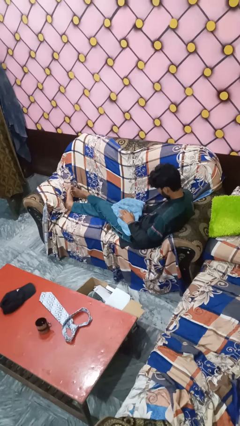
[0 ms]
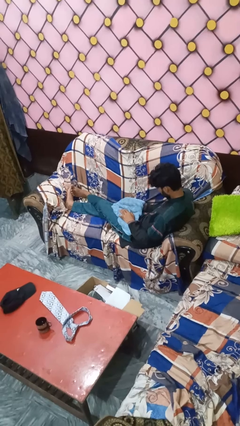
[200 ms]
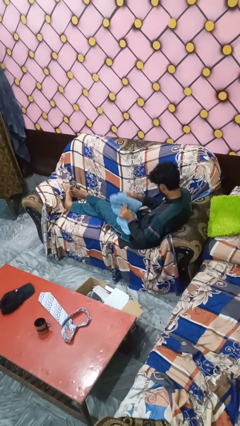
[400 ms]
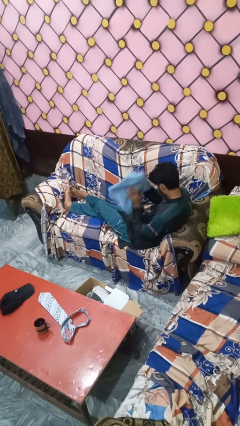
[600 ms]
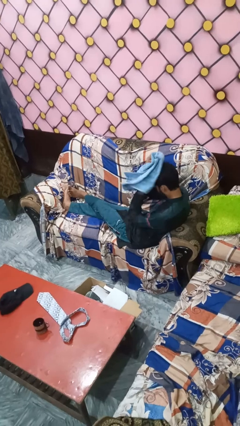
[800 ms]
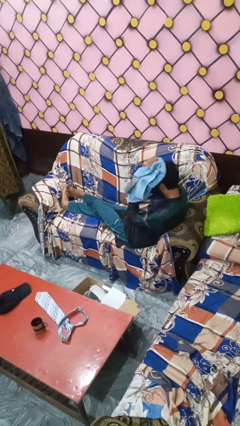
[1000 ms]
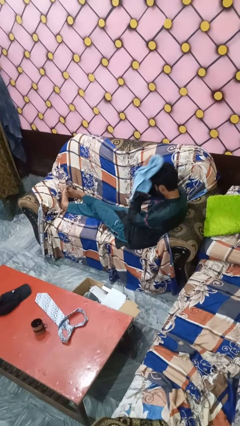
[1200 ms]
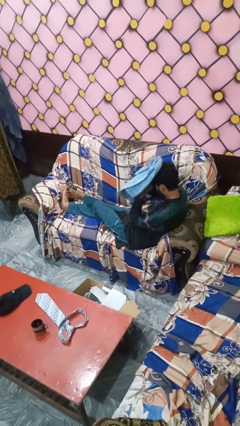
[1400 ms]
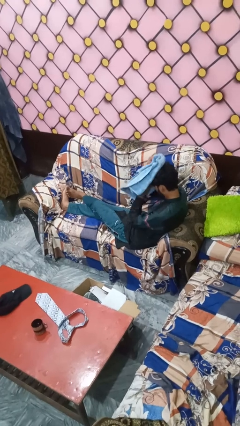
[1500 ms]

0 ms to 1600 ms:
person dries hair with towel

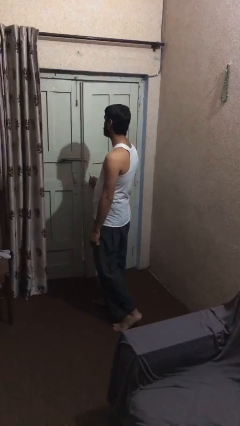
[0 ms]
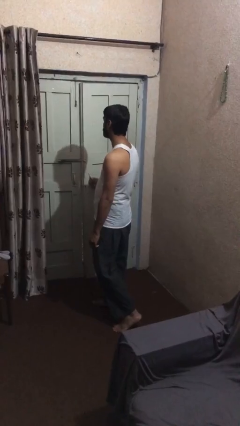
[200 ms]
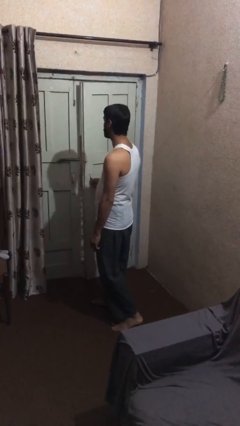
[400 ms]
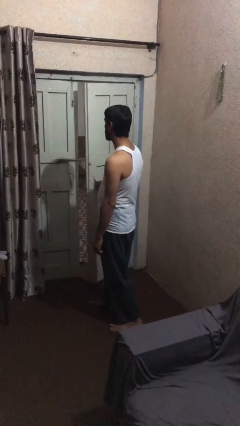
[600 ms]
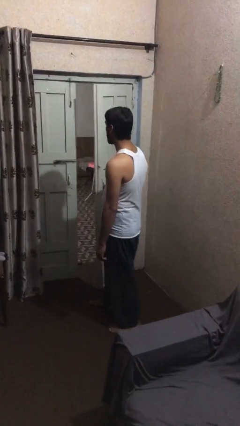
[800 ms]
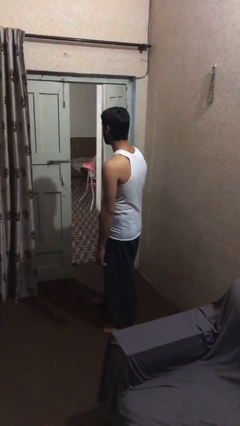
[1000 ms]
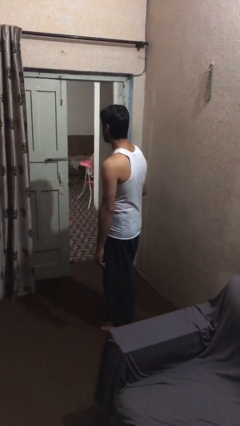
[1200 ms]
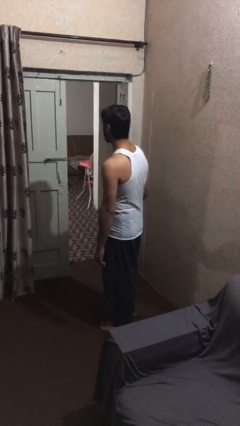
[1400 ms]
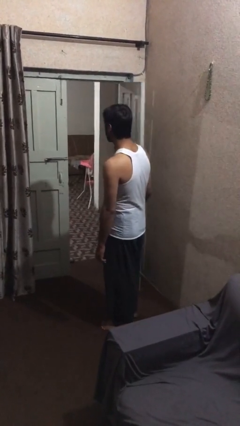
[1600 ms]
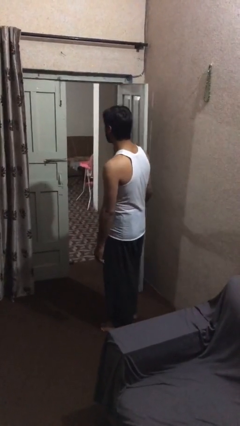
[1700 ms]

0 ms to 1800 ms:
person opens facility door

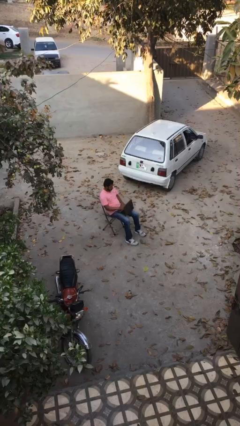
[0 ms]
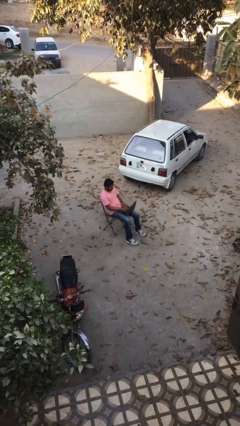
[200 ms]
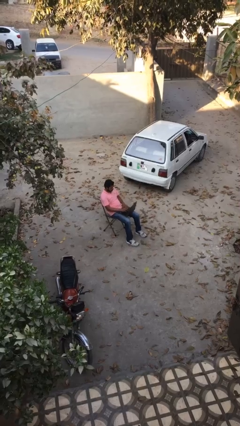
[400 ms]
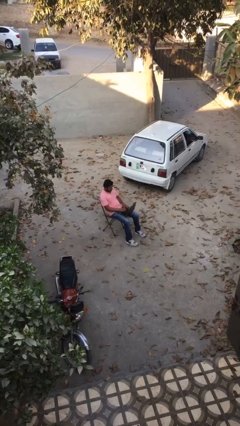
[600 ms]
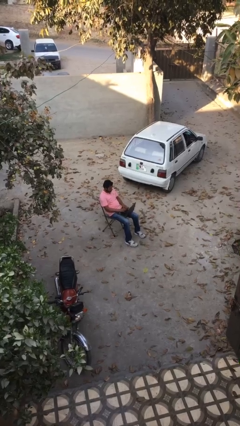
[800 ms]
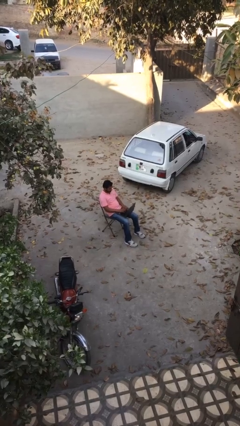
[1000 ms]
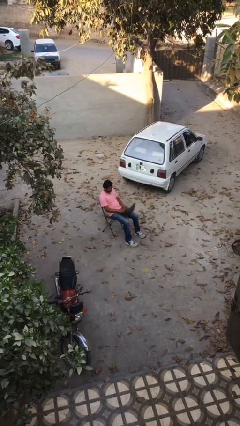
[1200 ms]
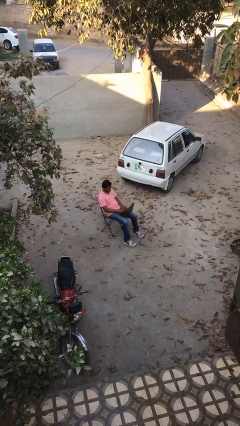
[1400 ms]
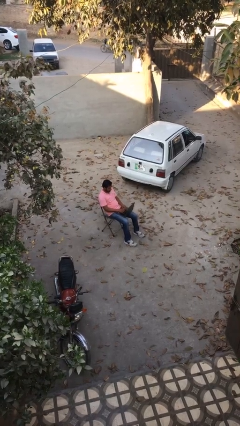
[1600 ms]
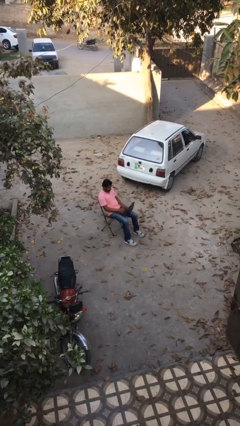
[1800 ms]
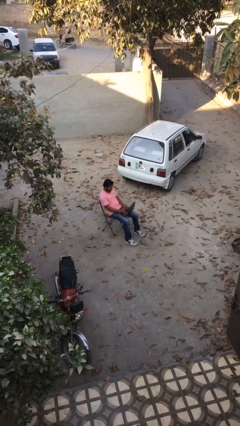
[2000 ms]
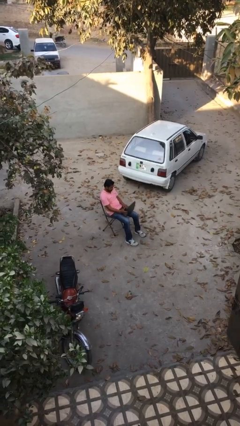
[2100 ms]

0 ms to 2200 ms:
person interacts with laptop

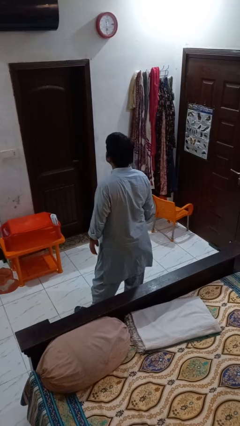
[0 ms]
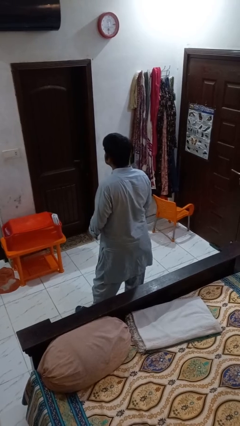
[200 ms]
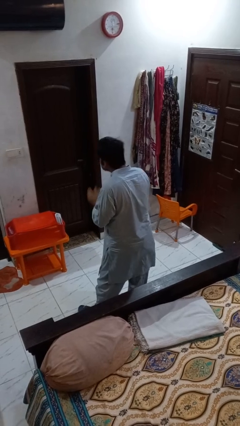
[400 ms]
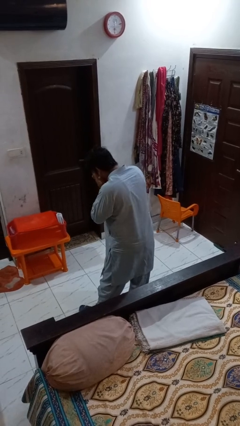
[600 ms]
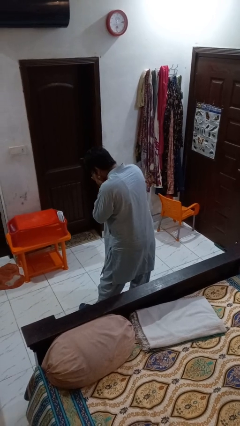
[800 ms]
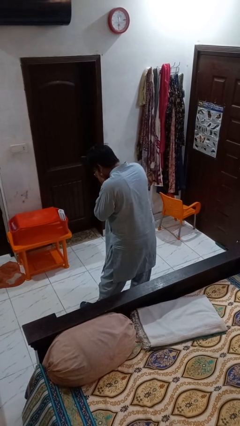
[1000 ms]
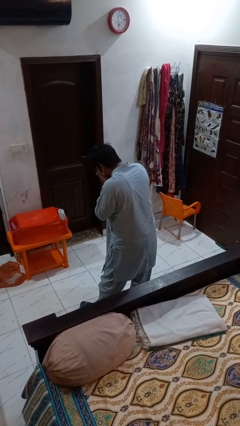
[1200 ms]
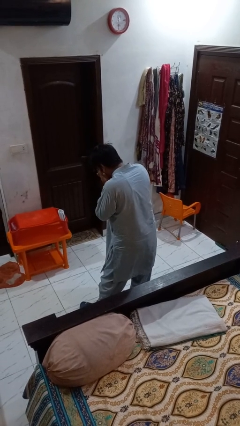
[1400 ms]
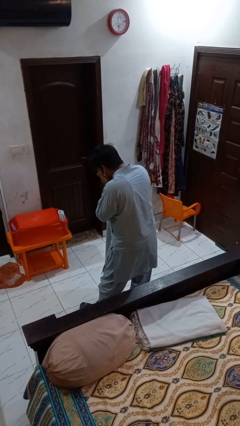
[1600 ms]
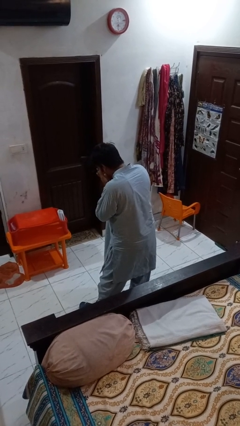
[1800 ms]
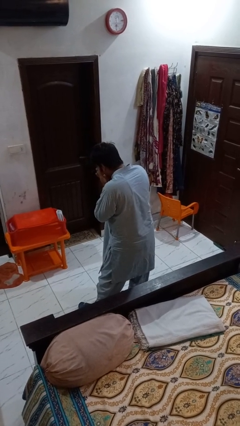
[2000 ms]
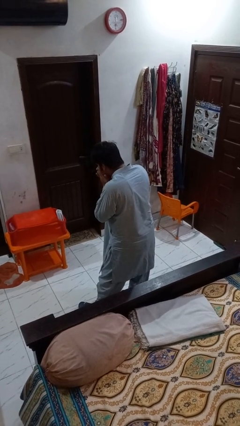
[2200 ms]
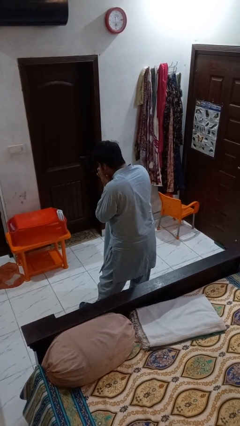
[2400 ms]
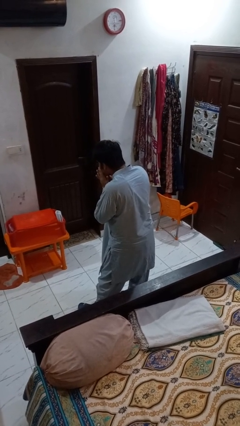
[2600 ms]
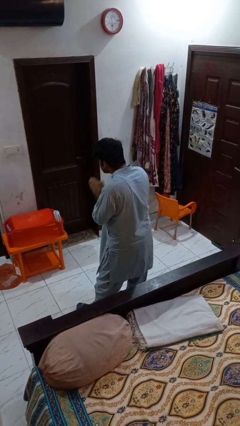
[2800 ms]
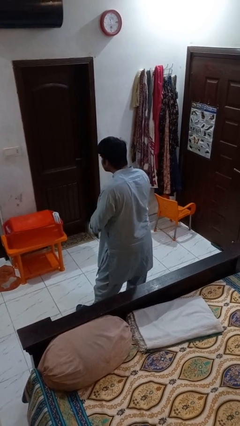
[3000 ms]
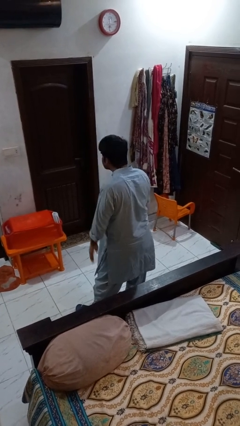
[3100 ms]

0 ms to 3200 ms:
person sneezes into hand

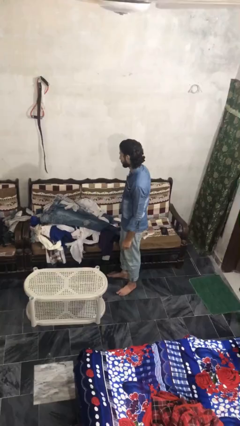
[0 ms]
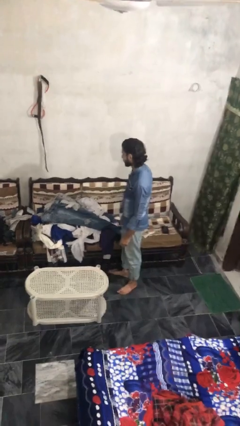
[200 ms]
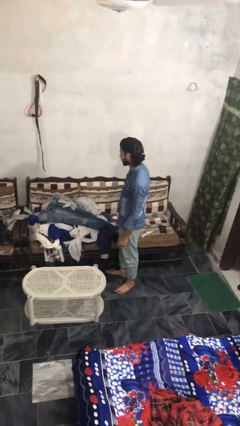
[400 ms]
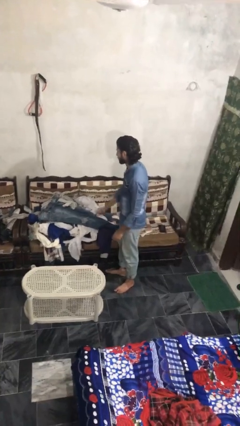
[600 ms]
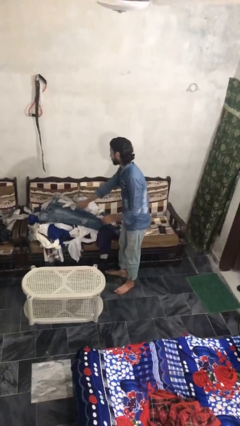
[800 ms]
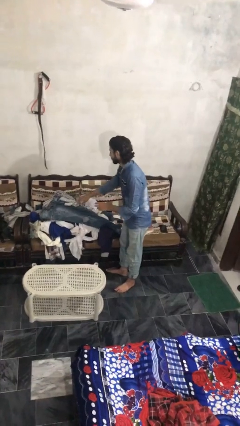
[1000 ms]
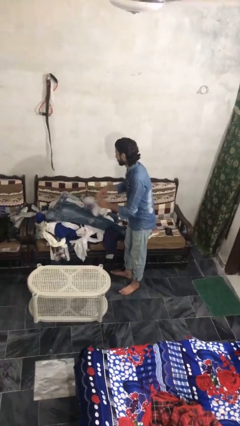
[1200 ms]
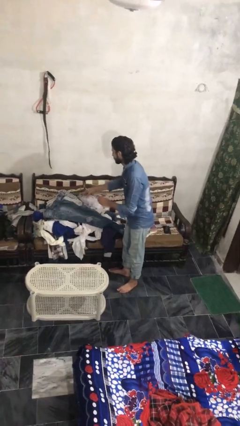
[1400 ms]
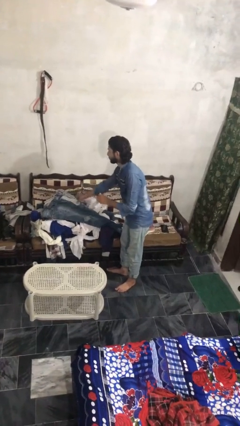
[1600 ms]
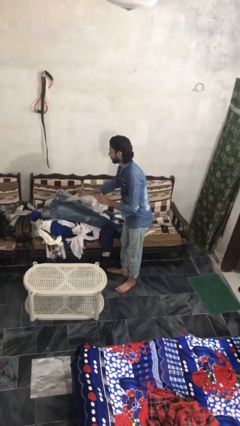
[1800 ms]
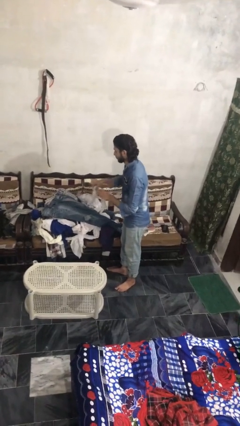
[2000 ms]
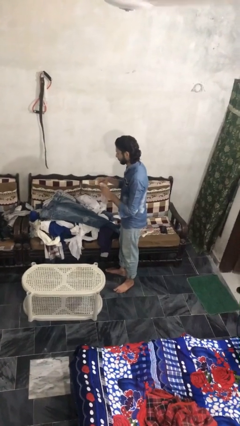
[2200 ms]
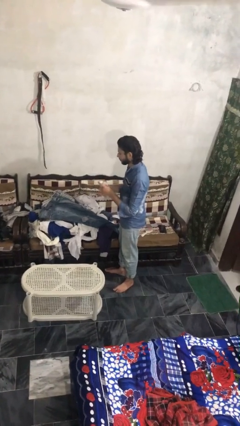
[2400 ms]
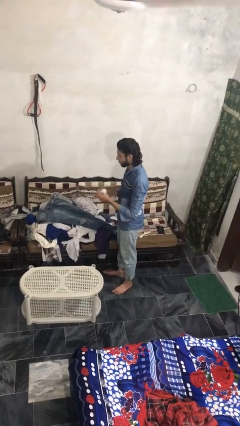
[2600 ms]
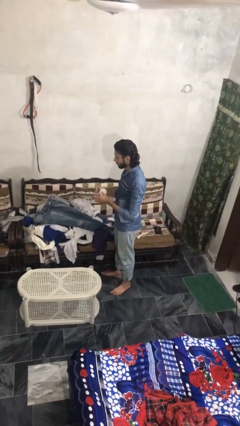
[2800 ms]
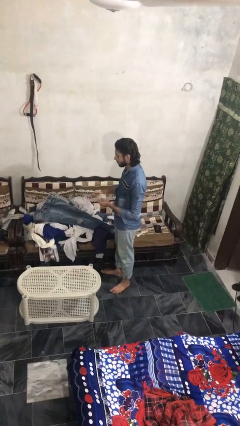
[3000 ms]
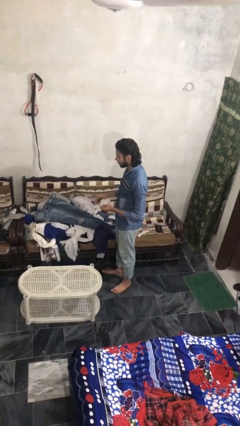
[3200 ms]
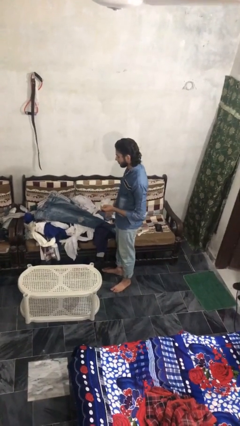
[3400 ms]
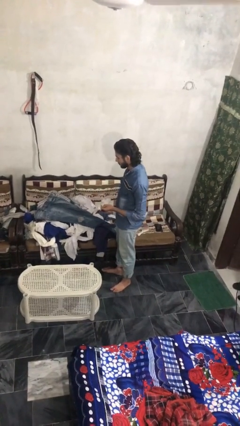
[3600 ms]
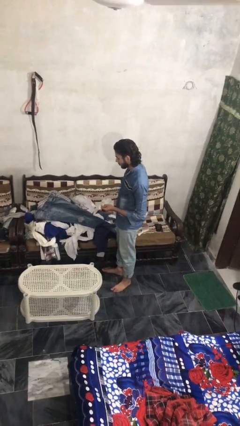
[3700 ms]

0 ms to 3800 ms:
person folds socks

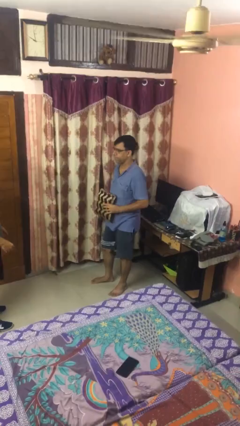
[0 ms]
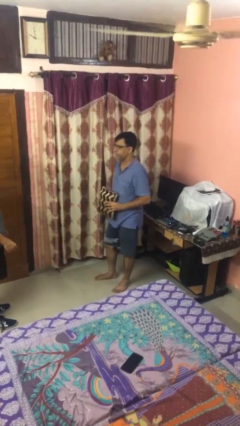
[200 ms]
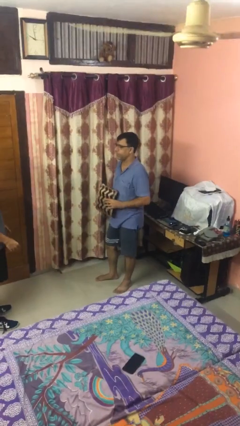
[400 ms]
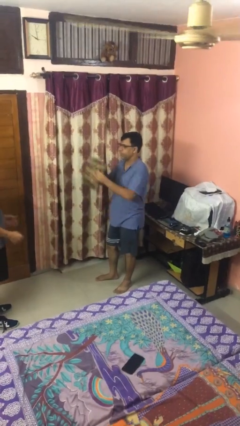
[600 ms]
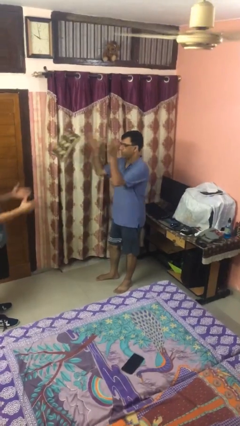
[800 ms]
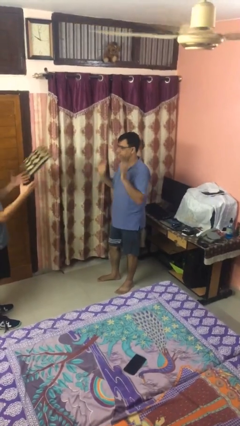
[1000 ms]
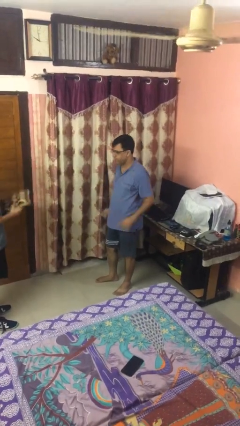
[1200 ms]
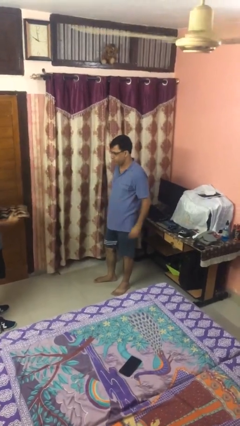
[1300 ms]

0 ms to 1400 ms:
person throws object to person

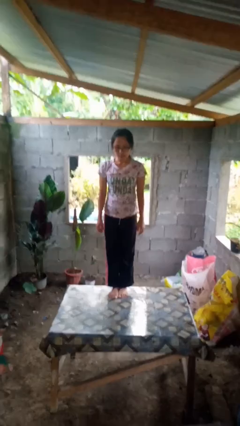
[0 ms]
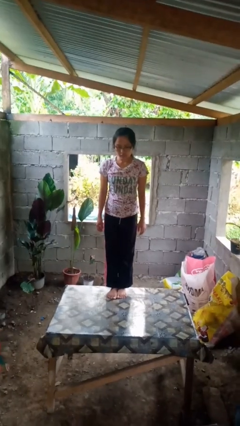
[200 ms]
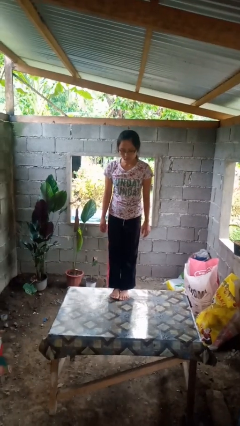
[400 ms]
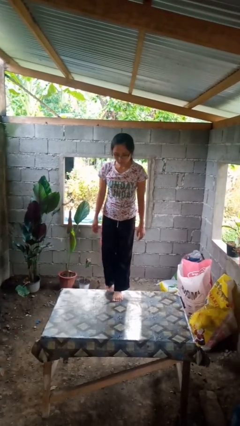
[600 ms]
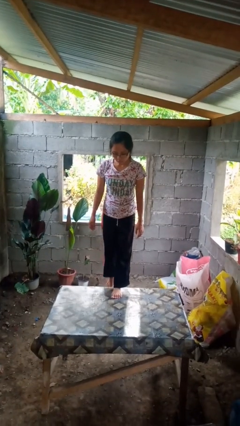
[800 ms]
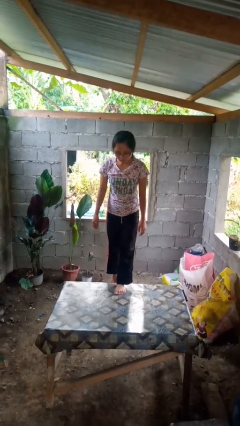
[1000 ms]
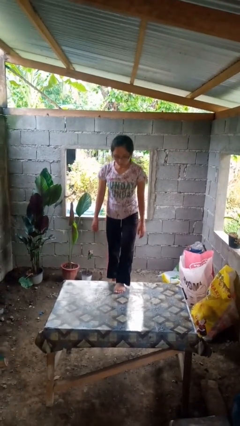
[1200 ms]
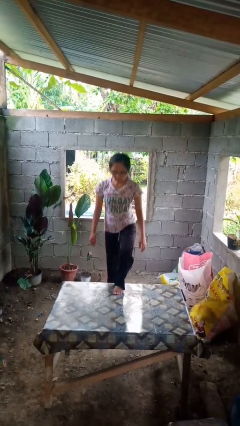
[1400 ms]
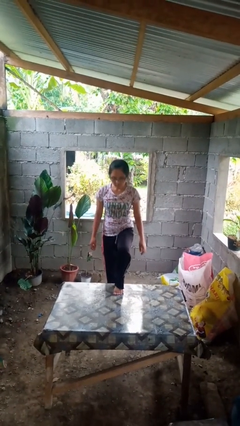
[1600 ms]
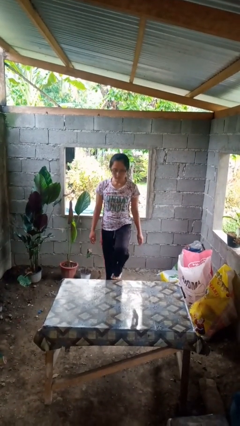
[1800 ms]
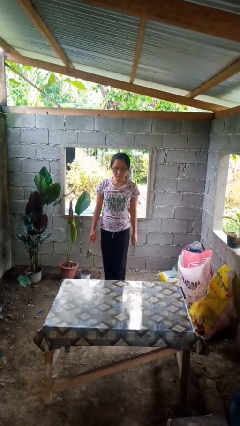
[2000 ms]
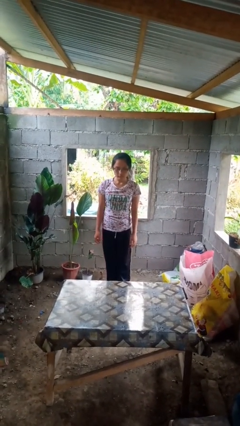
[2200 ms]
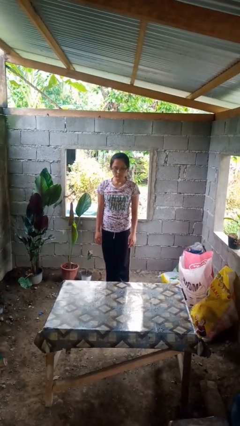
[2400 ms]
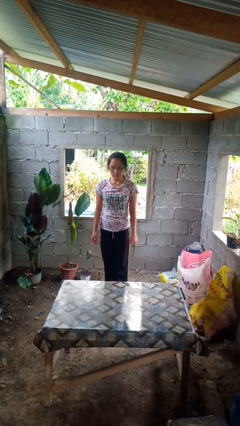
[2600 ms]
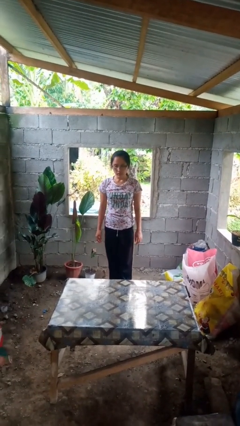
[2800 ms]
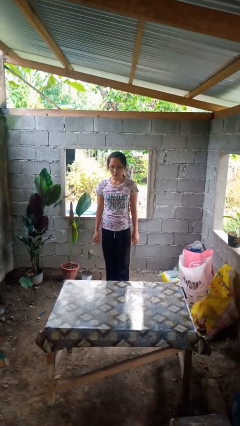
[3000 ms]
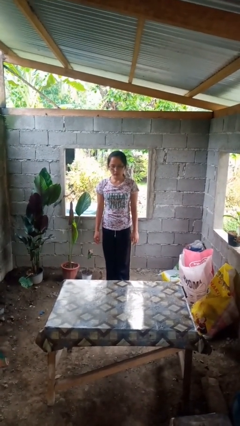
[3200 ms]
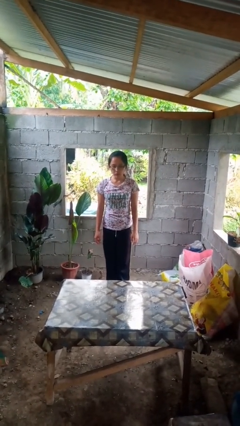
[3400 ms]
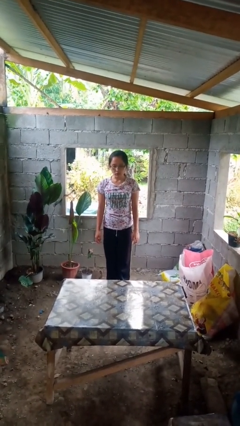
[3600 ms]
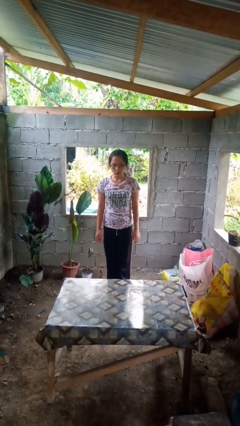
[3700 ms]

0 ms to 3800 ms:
person climbs off table
